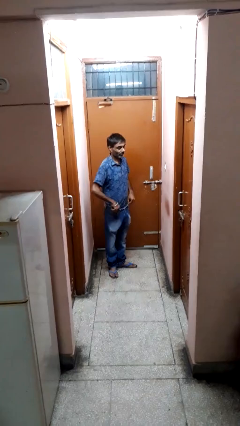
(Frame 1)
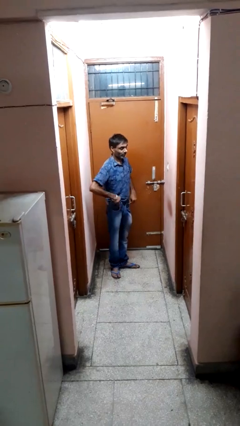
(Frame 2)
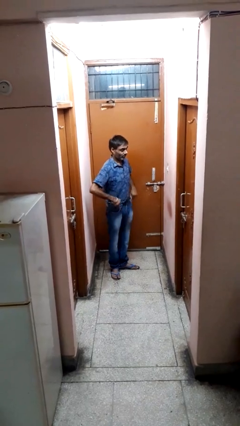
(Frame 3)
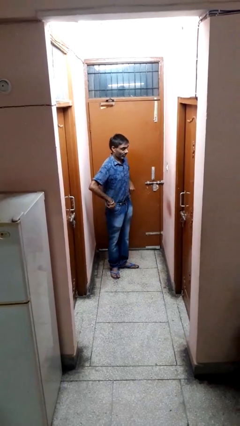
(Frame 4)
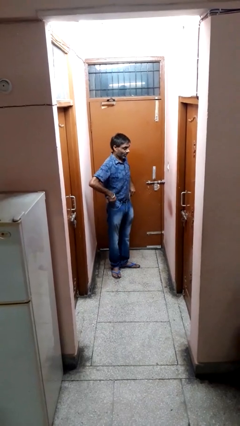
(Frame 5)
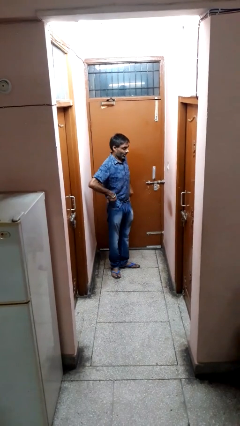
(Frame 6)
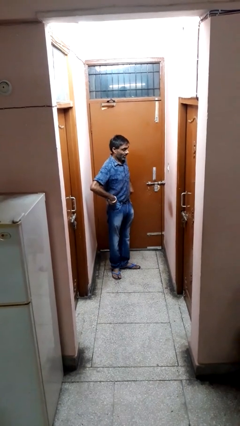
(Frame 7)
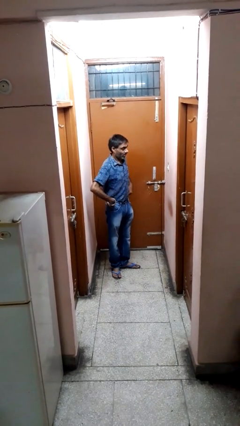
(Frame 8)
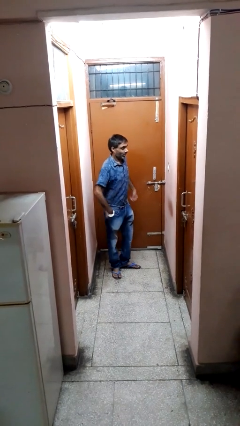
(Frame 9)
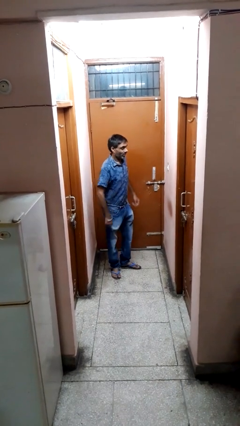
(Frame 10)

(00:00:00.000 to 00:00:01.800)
person hikes up pants

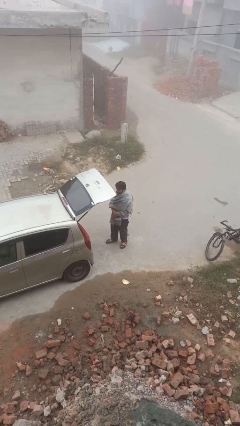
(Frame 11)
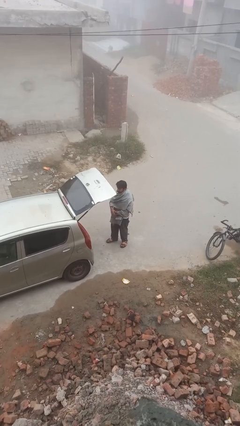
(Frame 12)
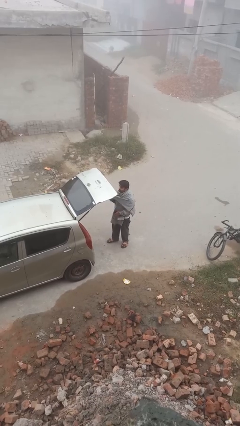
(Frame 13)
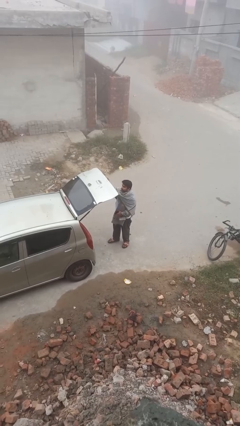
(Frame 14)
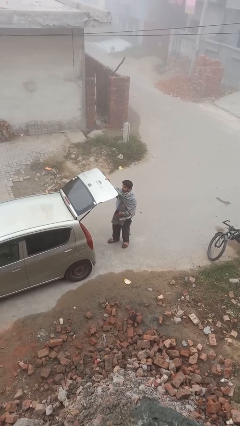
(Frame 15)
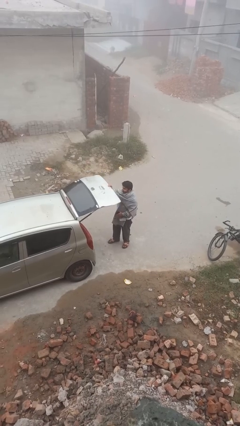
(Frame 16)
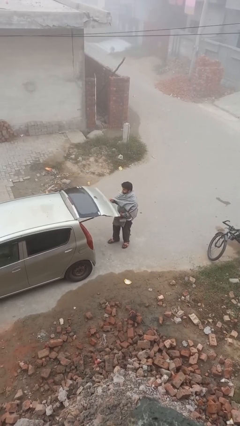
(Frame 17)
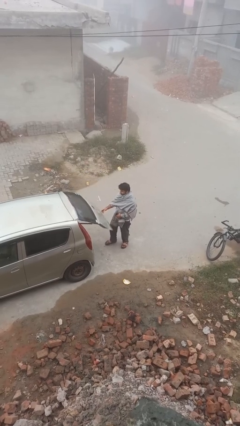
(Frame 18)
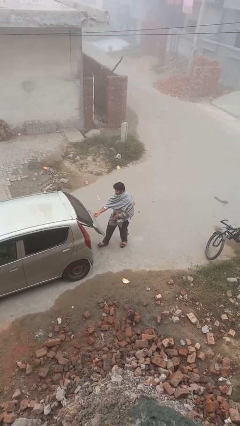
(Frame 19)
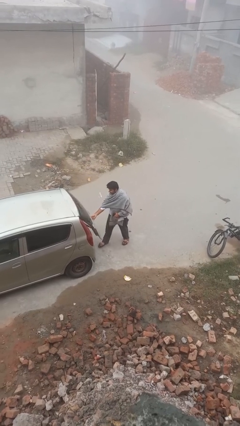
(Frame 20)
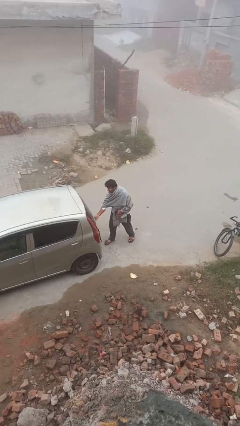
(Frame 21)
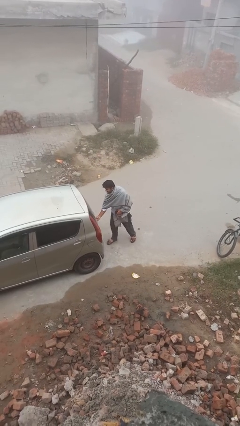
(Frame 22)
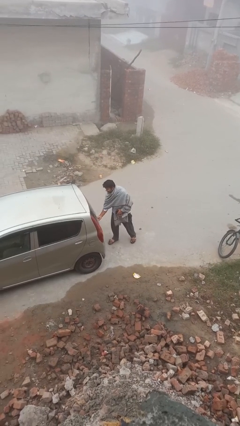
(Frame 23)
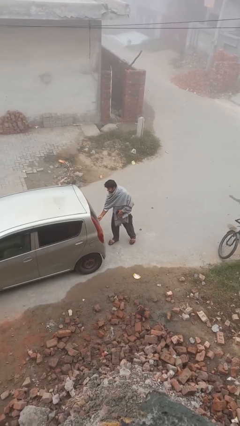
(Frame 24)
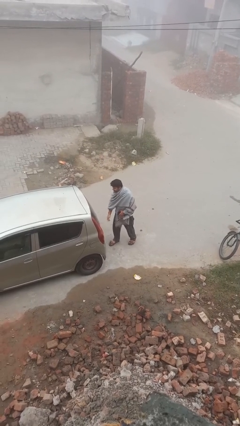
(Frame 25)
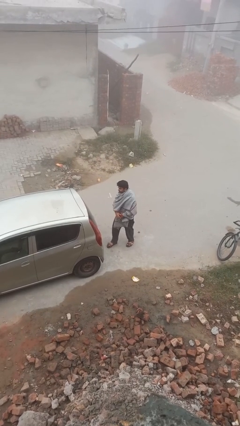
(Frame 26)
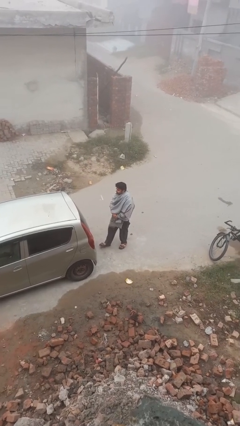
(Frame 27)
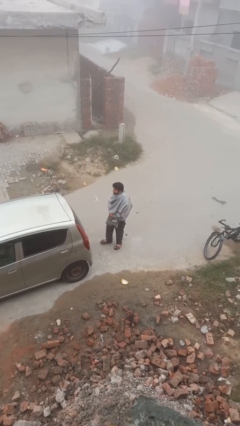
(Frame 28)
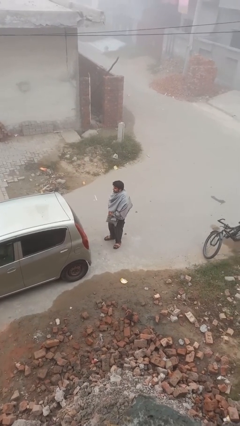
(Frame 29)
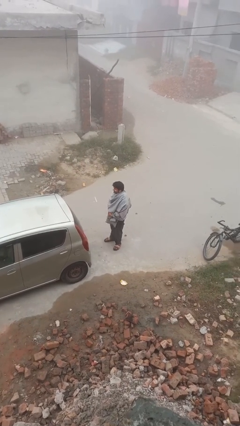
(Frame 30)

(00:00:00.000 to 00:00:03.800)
person closes car trunk

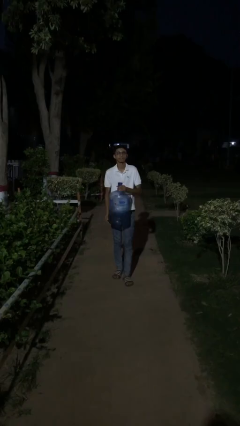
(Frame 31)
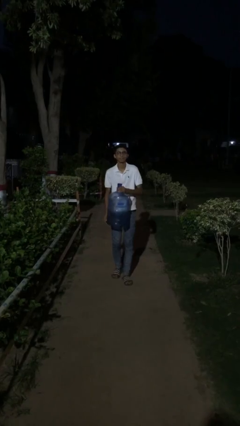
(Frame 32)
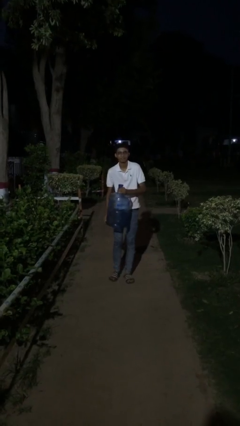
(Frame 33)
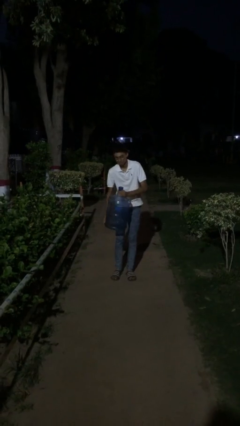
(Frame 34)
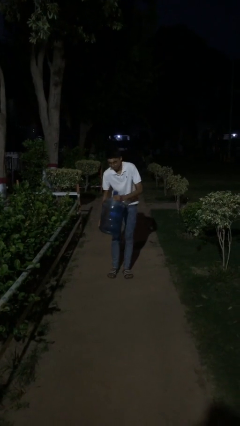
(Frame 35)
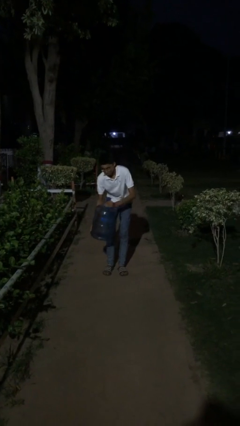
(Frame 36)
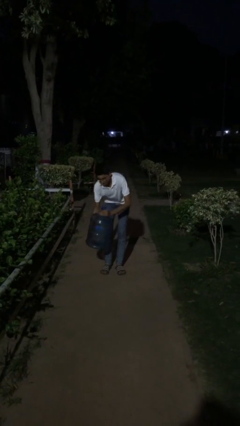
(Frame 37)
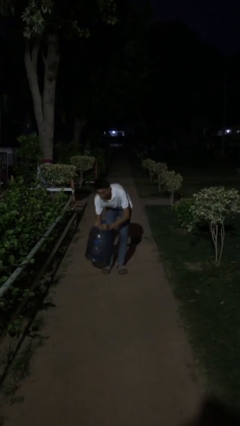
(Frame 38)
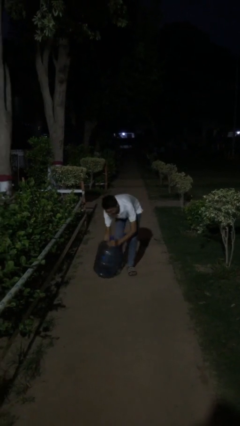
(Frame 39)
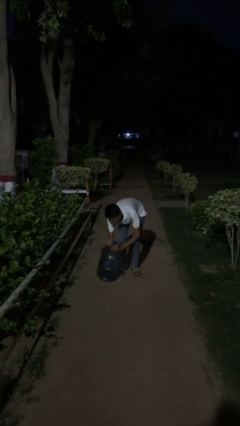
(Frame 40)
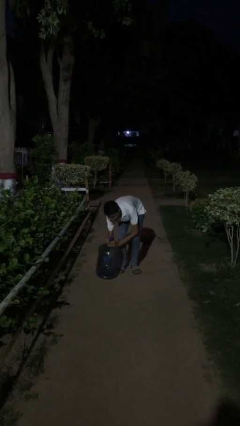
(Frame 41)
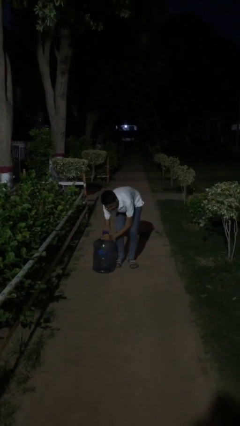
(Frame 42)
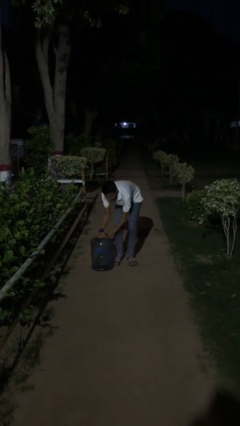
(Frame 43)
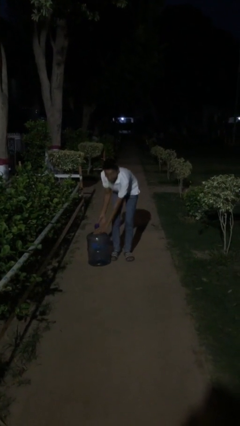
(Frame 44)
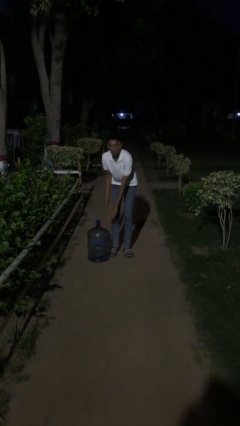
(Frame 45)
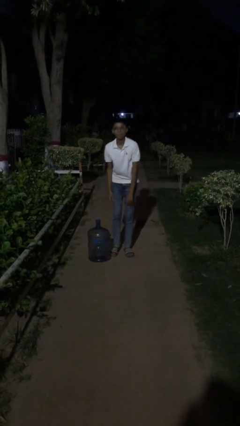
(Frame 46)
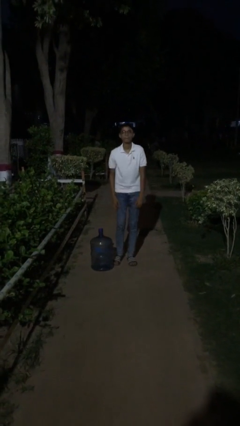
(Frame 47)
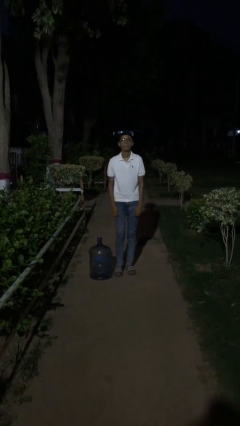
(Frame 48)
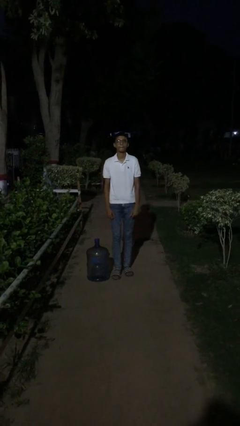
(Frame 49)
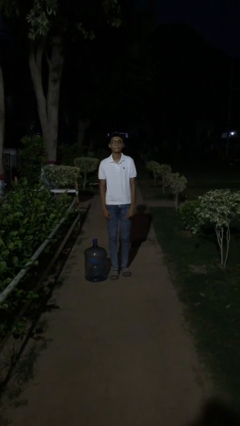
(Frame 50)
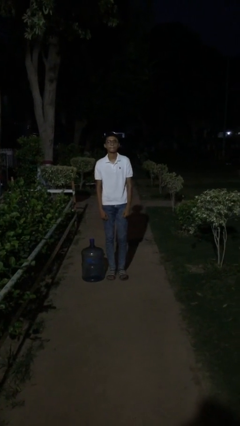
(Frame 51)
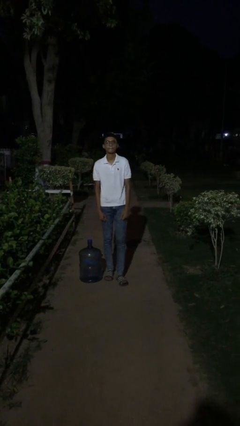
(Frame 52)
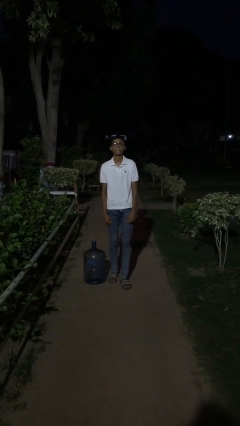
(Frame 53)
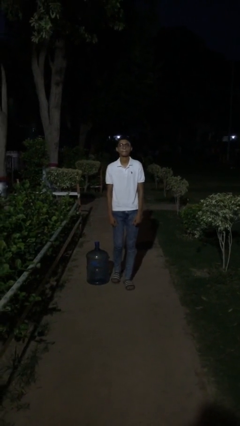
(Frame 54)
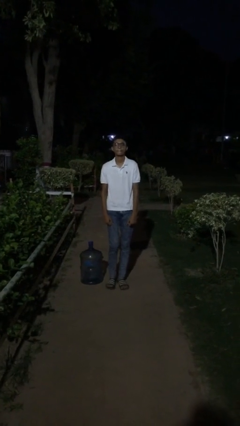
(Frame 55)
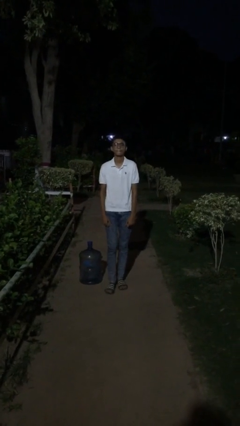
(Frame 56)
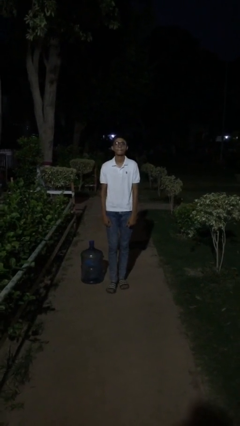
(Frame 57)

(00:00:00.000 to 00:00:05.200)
person puts down object on floor

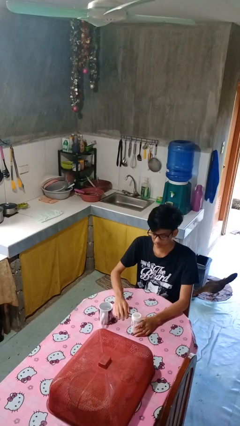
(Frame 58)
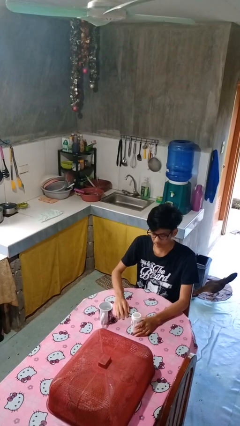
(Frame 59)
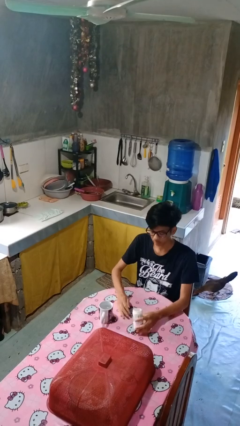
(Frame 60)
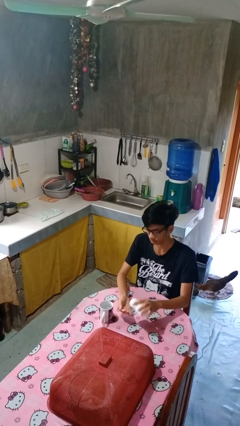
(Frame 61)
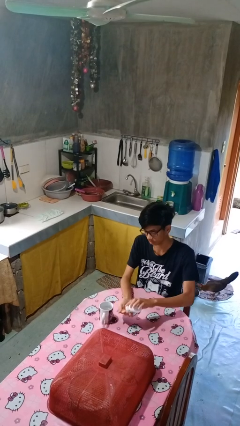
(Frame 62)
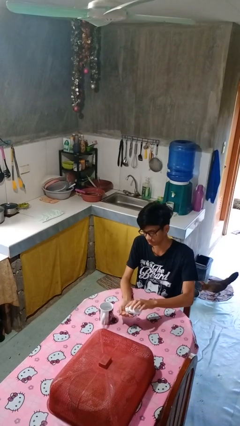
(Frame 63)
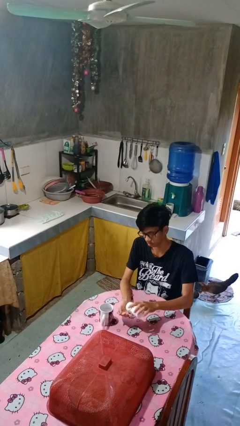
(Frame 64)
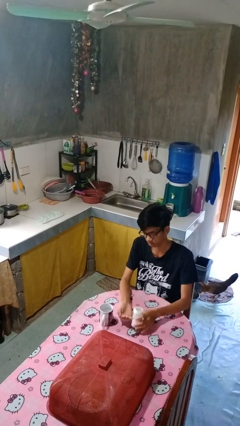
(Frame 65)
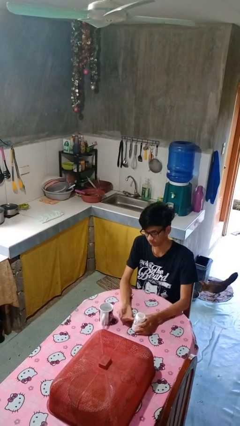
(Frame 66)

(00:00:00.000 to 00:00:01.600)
person takes medicine pills

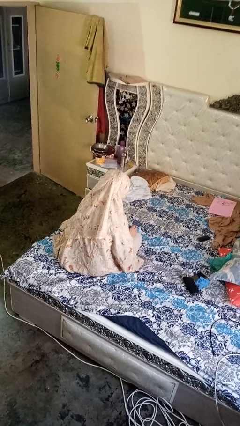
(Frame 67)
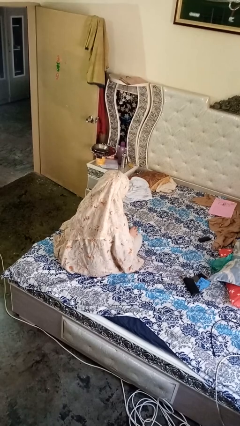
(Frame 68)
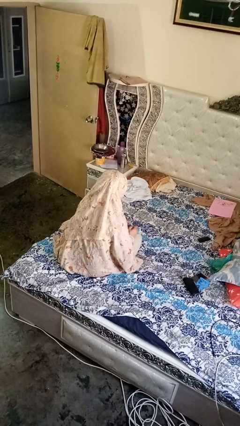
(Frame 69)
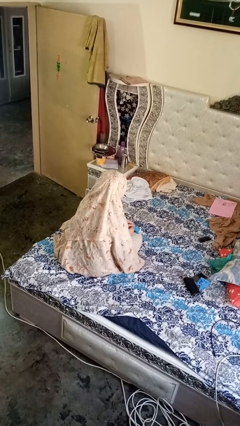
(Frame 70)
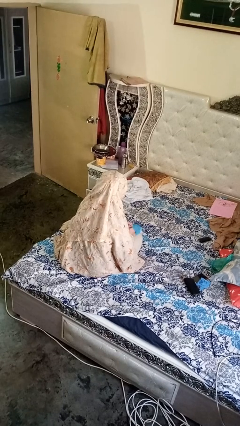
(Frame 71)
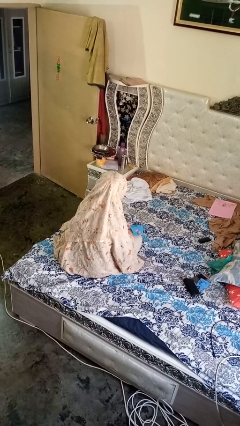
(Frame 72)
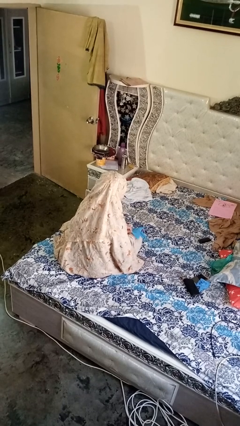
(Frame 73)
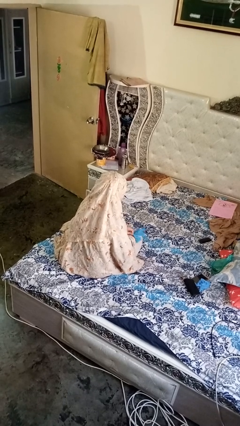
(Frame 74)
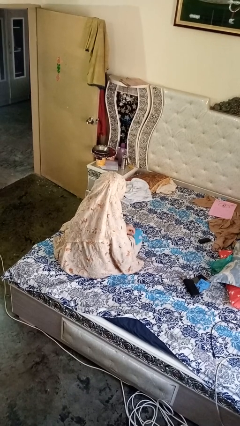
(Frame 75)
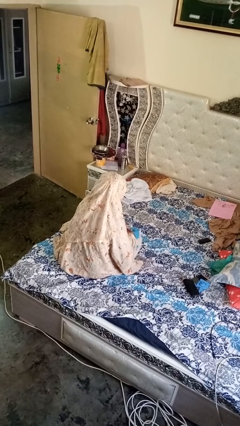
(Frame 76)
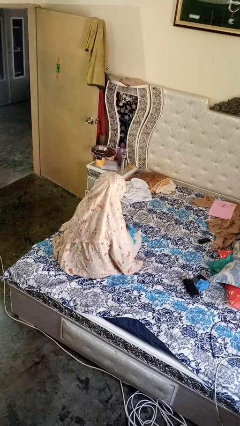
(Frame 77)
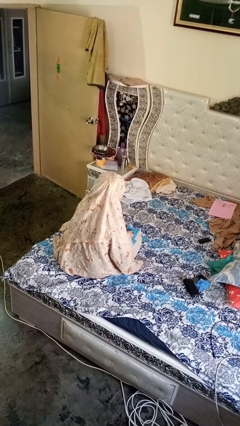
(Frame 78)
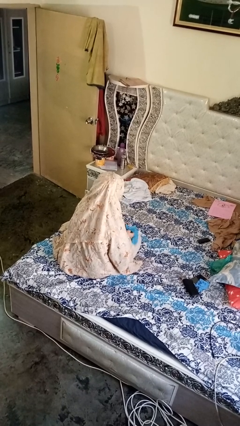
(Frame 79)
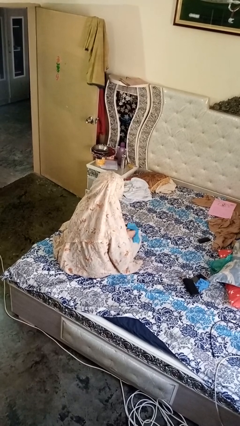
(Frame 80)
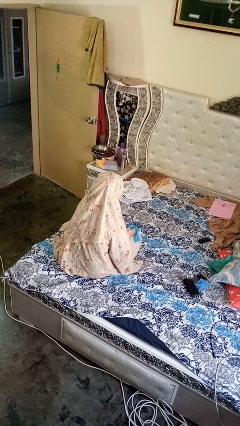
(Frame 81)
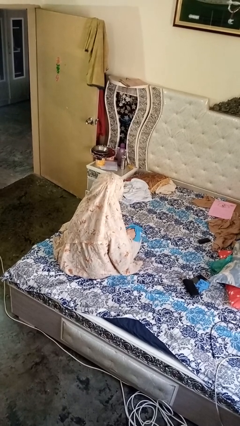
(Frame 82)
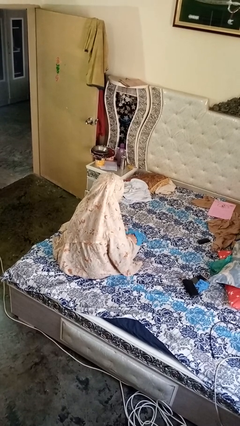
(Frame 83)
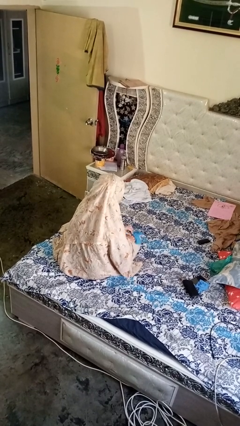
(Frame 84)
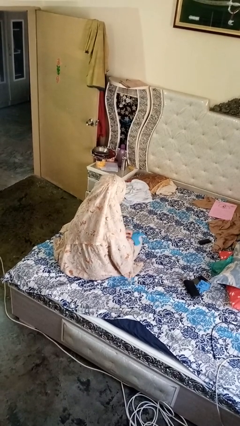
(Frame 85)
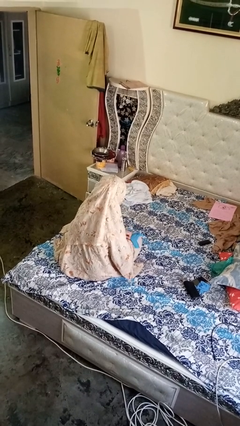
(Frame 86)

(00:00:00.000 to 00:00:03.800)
person puts on gloves

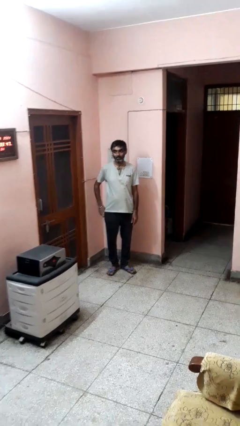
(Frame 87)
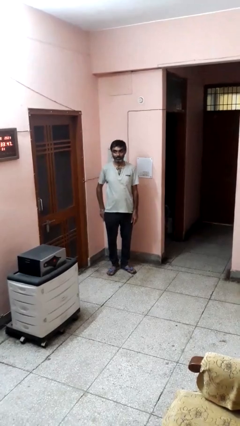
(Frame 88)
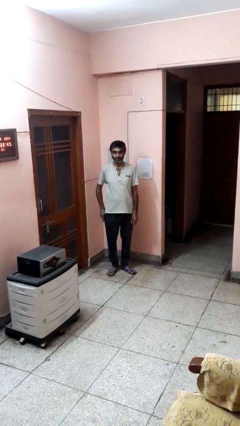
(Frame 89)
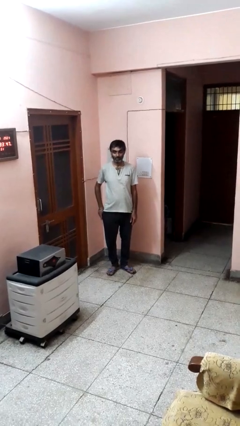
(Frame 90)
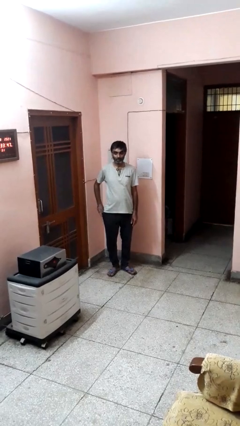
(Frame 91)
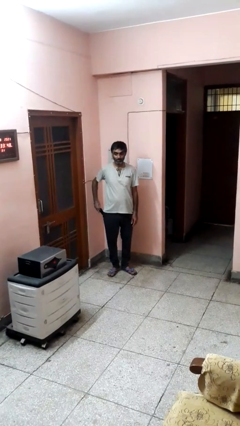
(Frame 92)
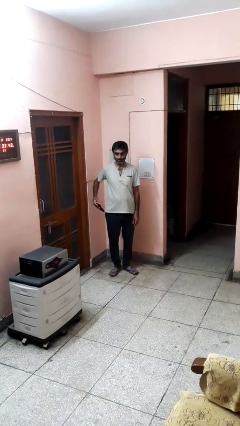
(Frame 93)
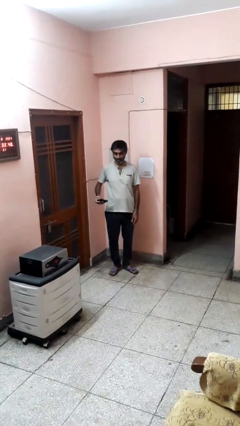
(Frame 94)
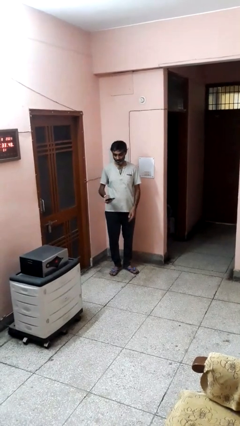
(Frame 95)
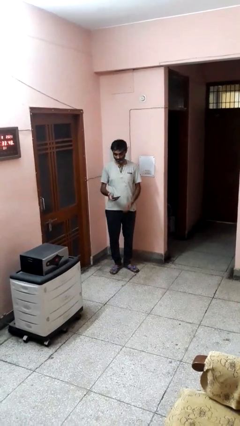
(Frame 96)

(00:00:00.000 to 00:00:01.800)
person takes phone from pocket
